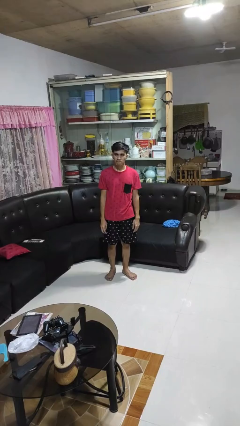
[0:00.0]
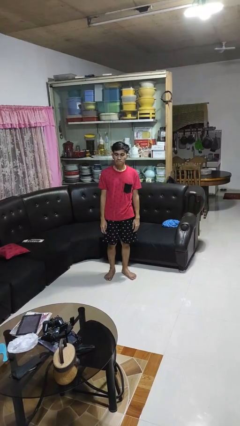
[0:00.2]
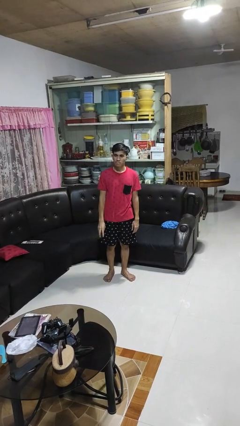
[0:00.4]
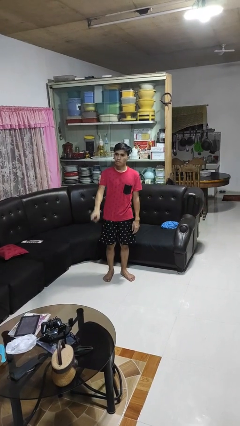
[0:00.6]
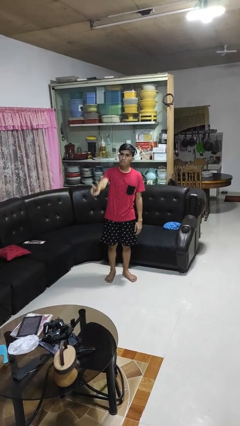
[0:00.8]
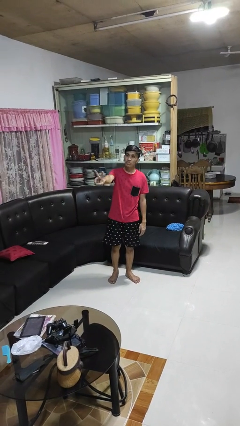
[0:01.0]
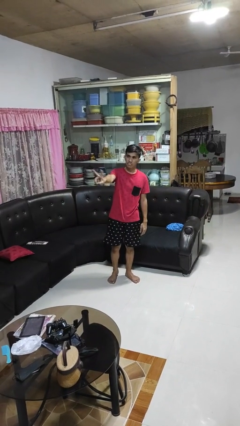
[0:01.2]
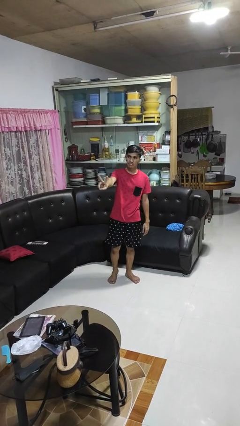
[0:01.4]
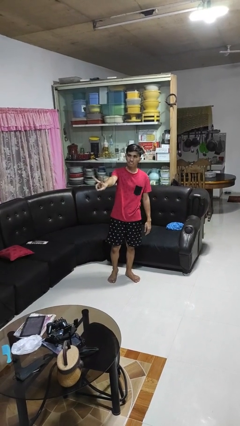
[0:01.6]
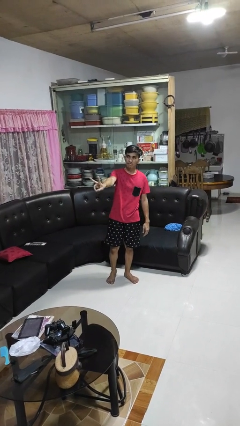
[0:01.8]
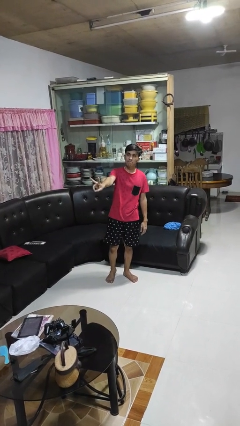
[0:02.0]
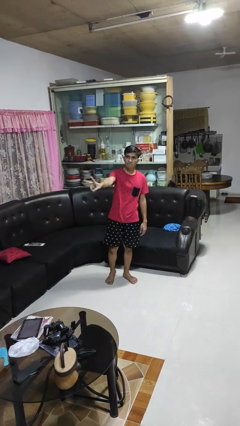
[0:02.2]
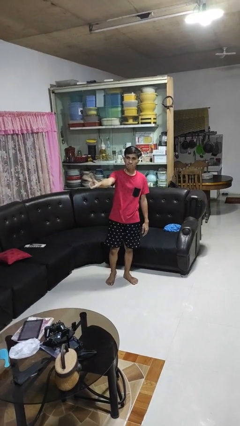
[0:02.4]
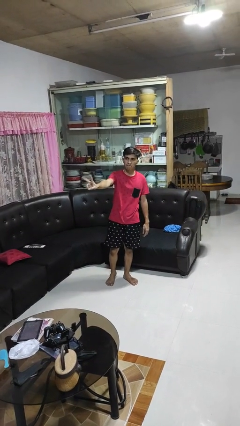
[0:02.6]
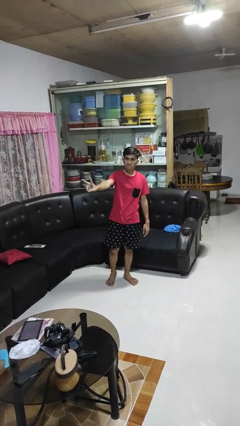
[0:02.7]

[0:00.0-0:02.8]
person gestures peace

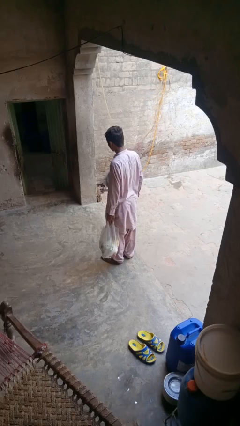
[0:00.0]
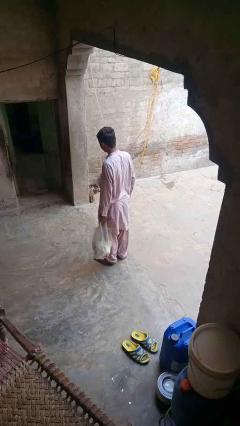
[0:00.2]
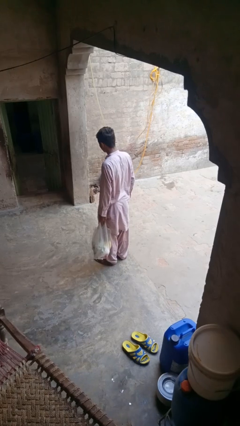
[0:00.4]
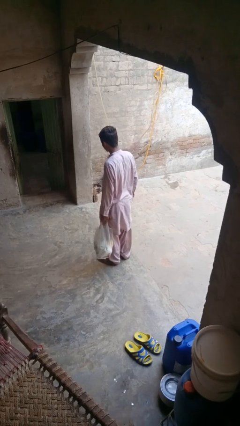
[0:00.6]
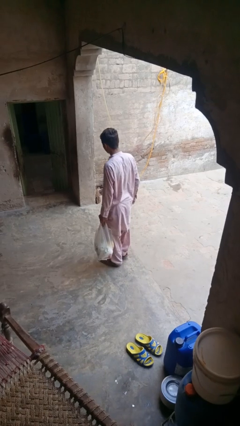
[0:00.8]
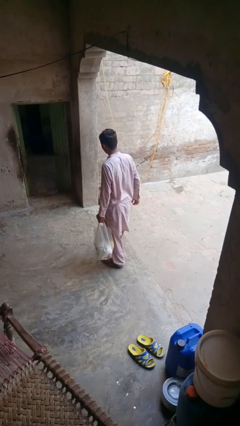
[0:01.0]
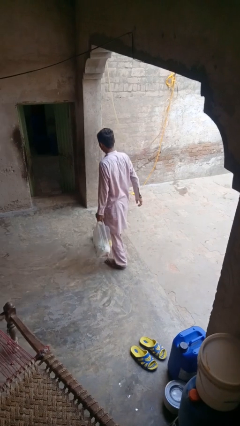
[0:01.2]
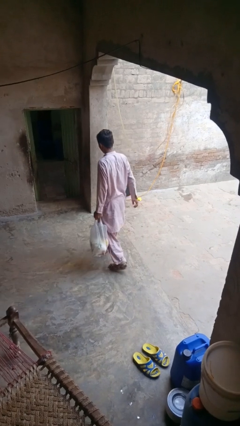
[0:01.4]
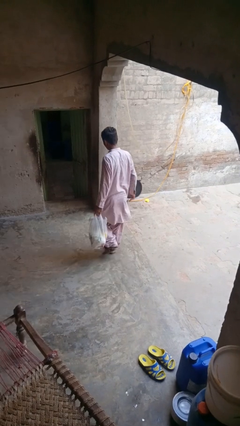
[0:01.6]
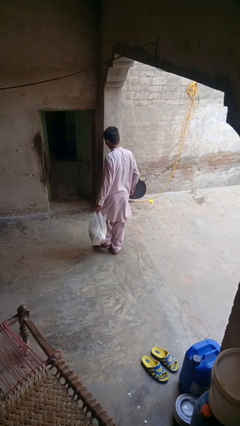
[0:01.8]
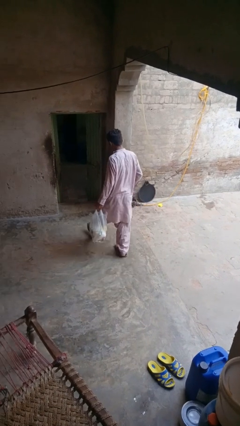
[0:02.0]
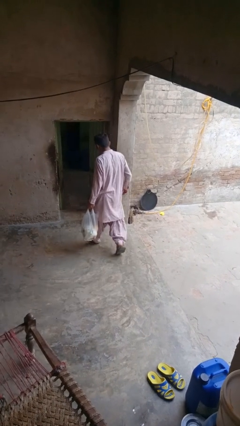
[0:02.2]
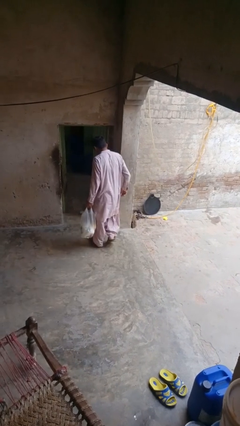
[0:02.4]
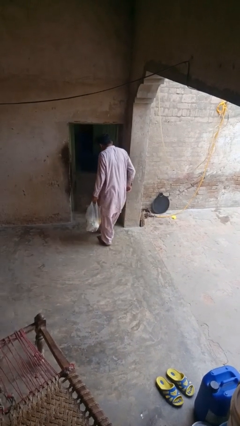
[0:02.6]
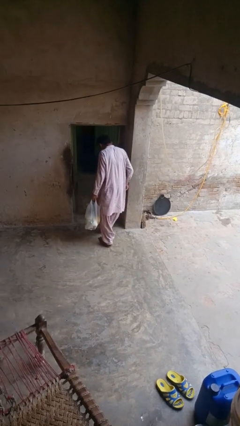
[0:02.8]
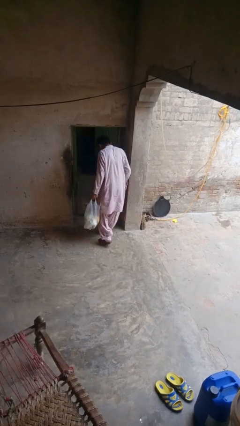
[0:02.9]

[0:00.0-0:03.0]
person carries groceries

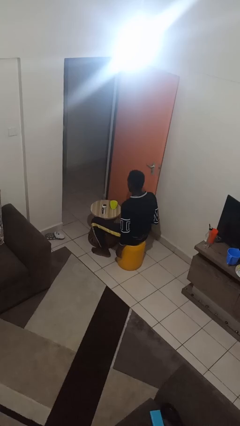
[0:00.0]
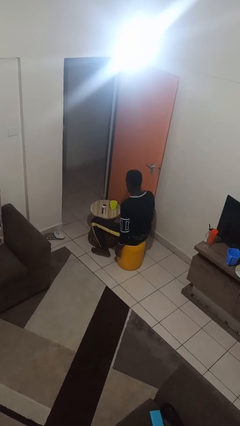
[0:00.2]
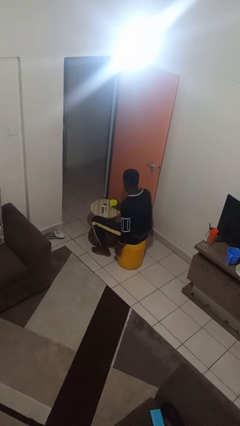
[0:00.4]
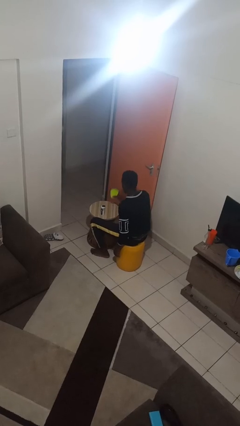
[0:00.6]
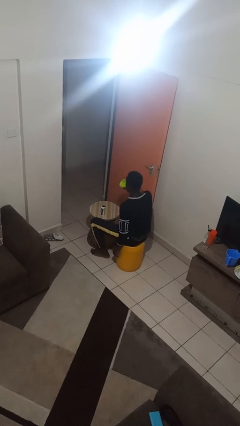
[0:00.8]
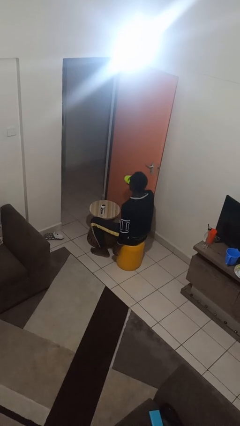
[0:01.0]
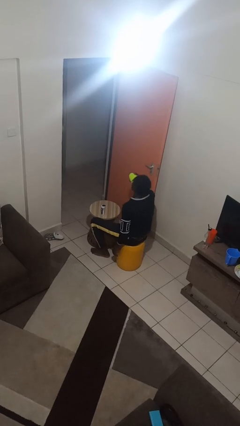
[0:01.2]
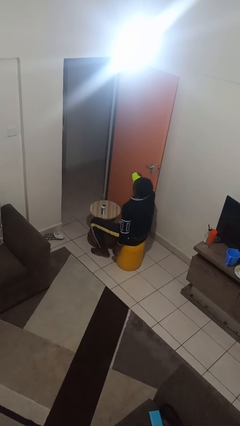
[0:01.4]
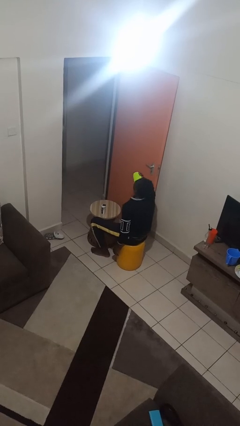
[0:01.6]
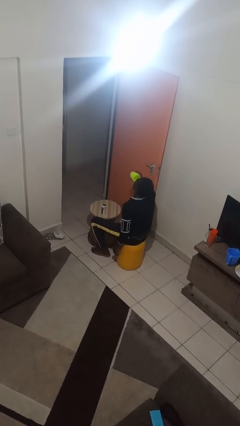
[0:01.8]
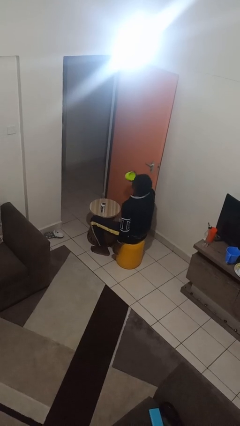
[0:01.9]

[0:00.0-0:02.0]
person drinks from cup

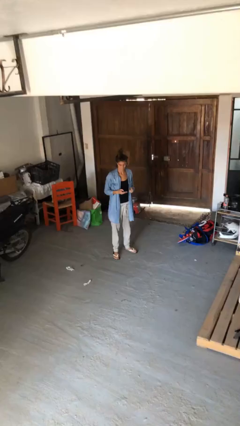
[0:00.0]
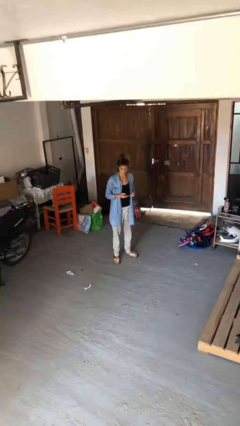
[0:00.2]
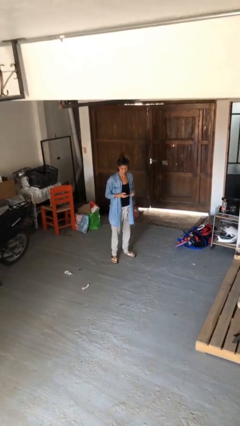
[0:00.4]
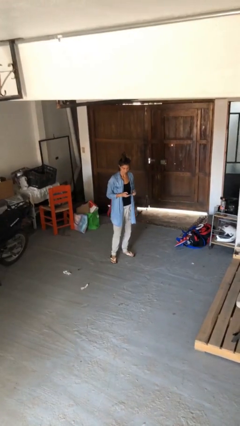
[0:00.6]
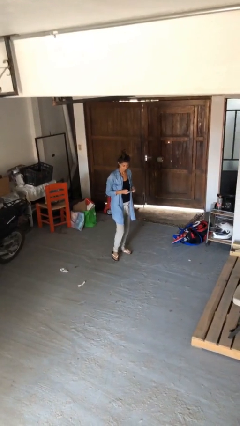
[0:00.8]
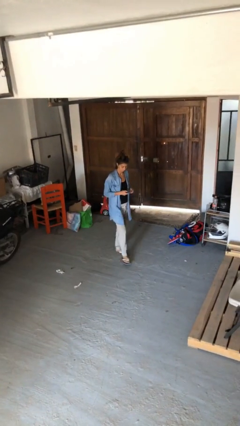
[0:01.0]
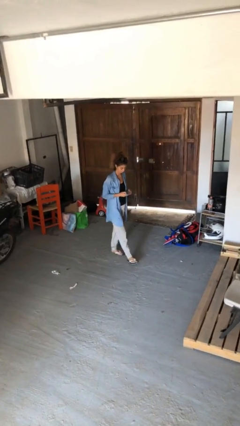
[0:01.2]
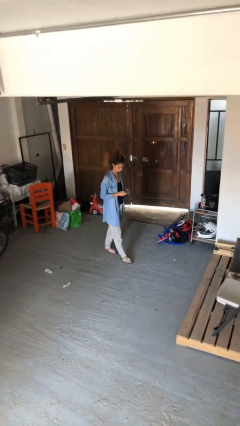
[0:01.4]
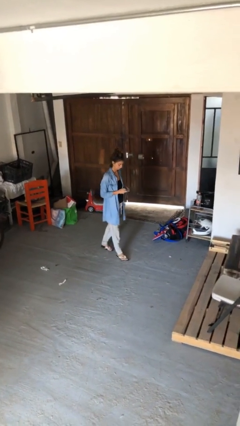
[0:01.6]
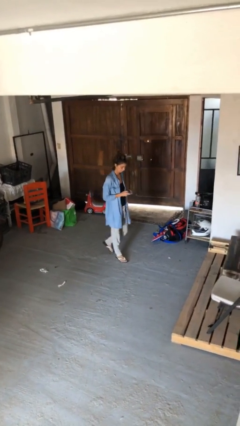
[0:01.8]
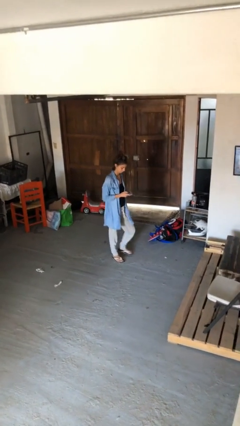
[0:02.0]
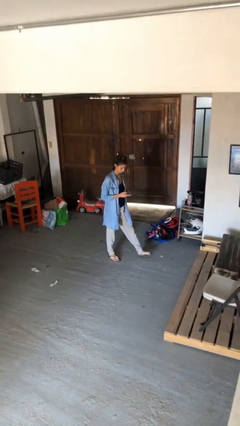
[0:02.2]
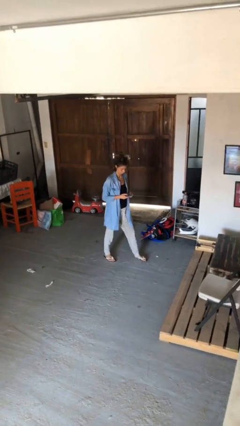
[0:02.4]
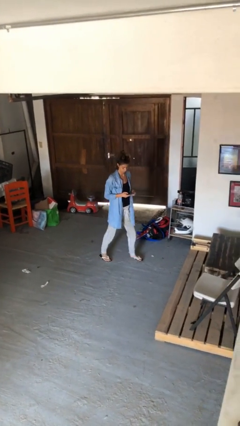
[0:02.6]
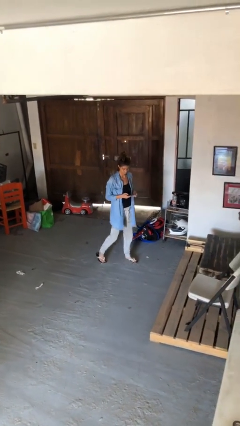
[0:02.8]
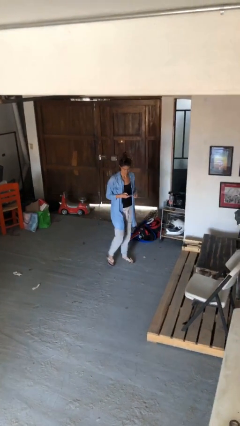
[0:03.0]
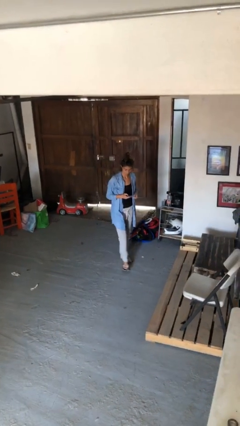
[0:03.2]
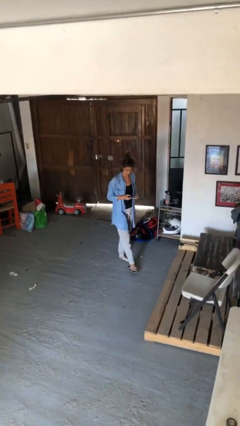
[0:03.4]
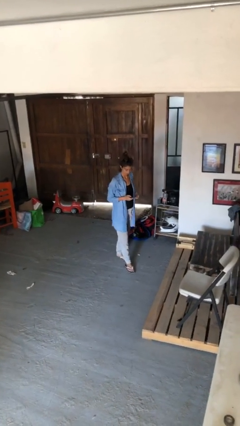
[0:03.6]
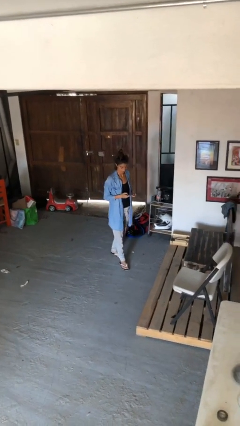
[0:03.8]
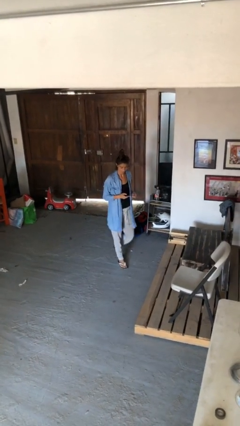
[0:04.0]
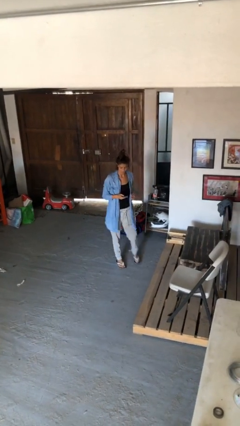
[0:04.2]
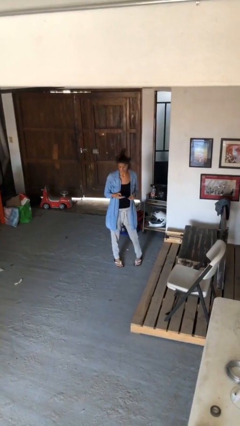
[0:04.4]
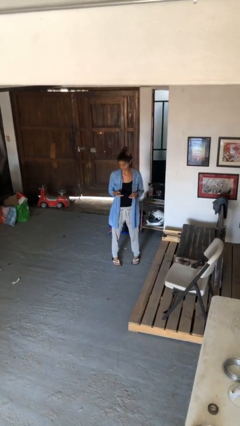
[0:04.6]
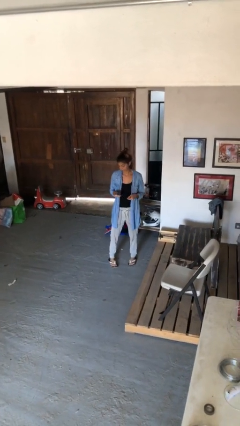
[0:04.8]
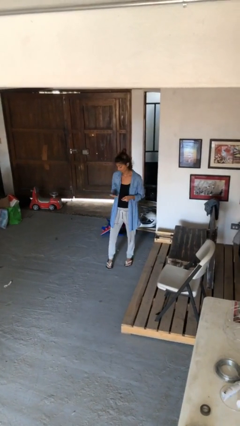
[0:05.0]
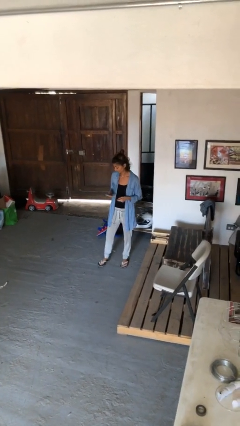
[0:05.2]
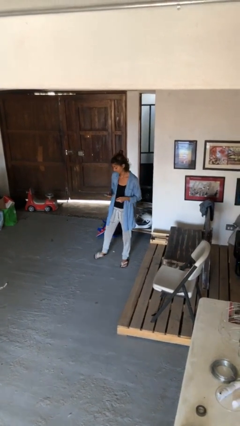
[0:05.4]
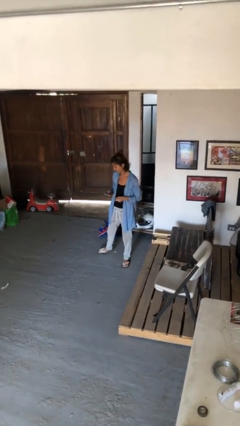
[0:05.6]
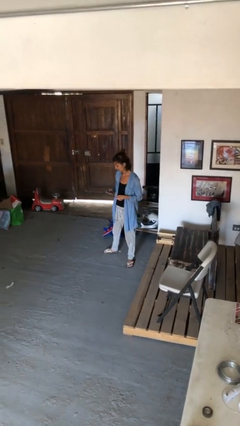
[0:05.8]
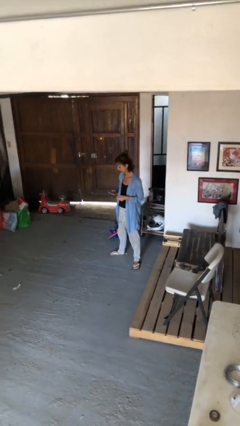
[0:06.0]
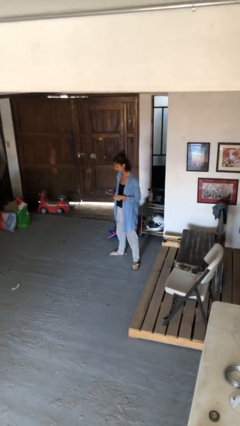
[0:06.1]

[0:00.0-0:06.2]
person texts on phone

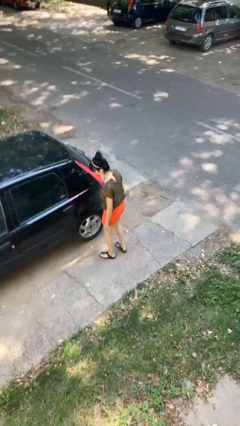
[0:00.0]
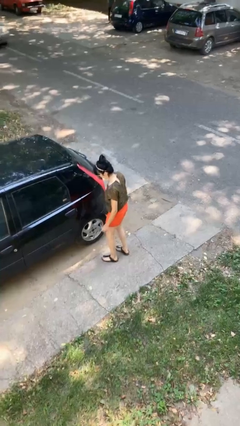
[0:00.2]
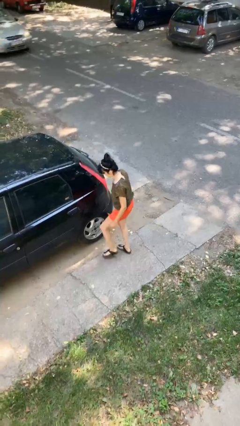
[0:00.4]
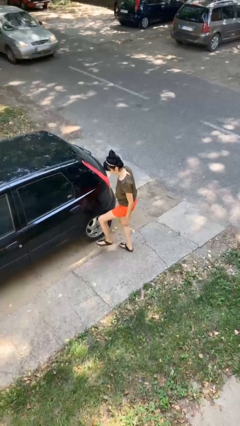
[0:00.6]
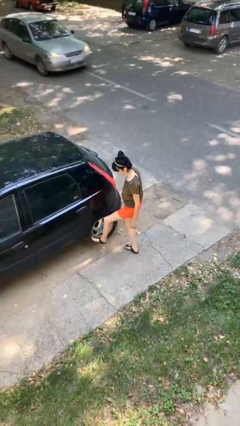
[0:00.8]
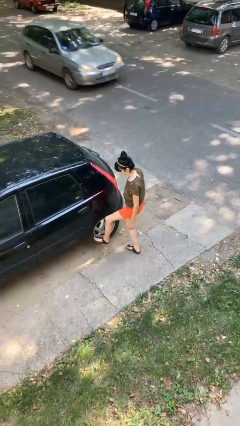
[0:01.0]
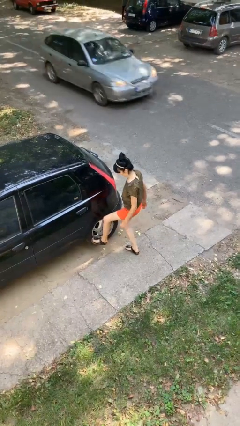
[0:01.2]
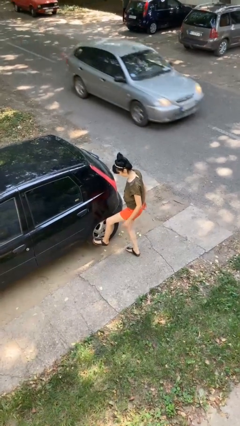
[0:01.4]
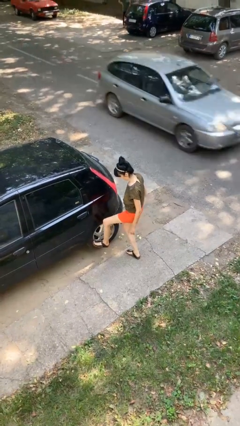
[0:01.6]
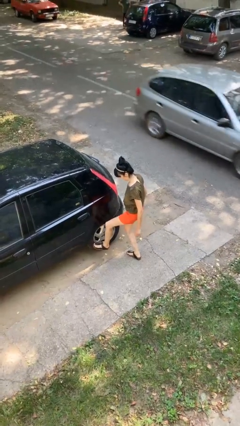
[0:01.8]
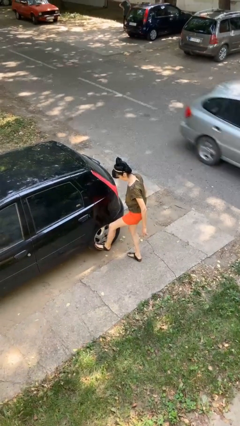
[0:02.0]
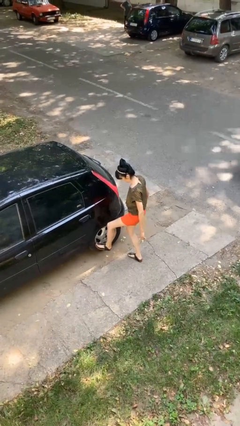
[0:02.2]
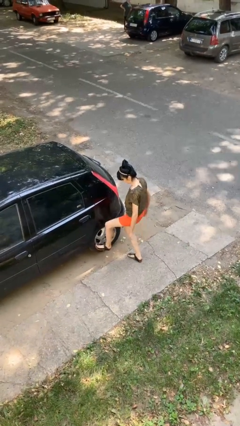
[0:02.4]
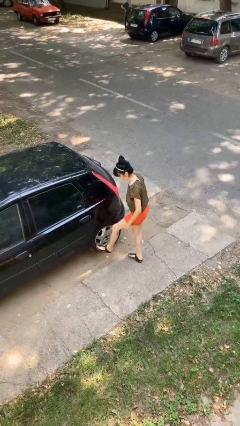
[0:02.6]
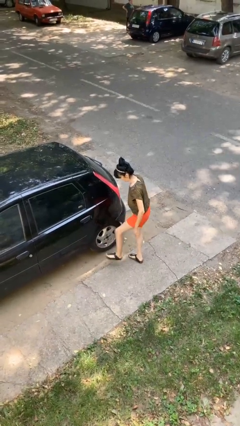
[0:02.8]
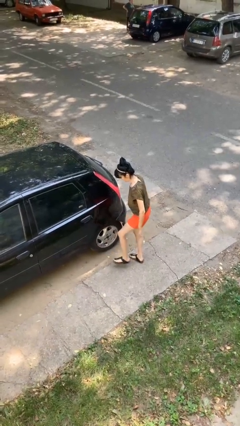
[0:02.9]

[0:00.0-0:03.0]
person kicks car tires

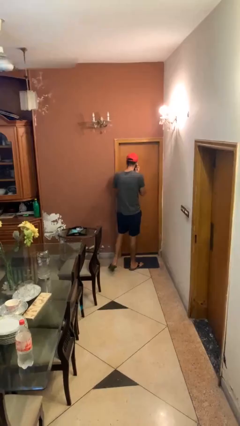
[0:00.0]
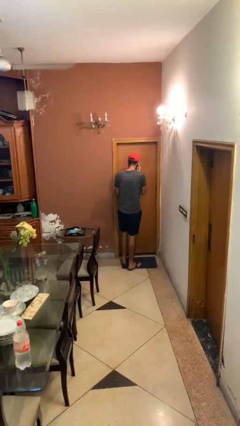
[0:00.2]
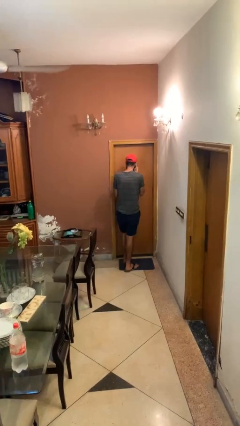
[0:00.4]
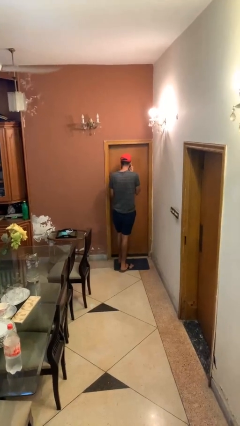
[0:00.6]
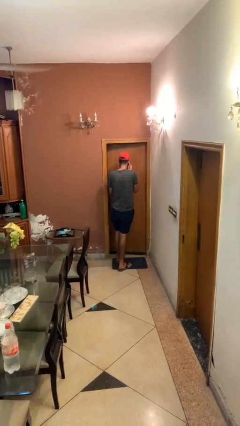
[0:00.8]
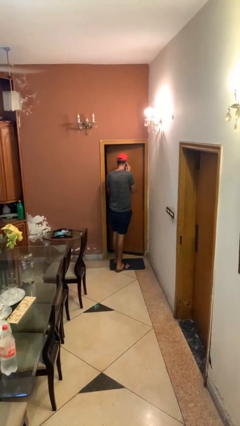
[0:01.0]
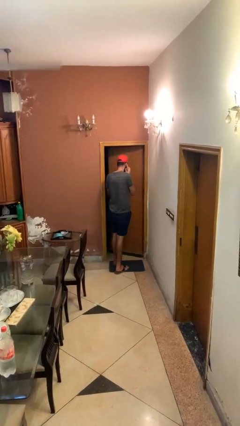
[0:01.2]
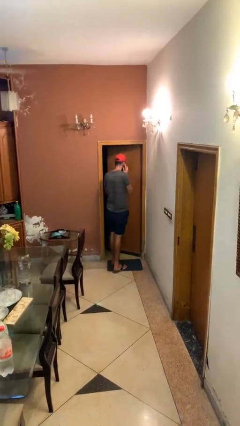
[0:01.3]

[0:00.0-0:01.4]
person opens facility door
